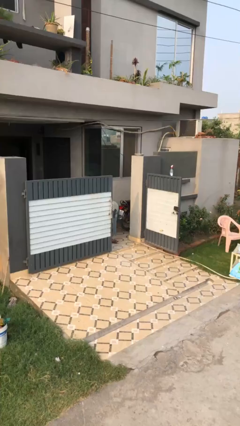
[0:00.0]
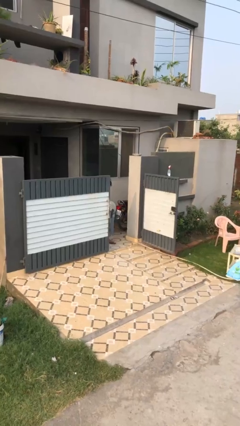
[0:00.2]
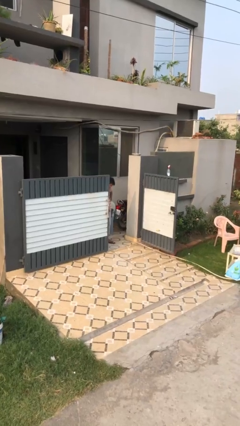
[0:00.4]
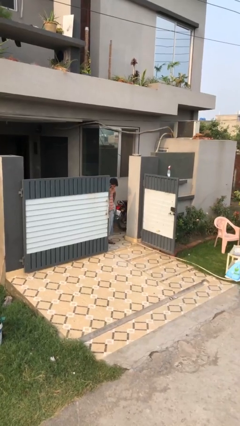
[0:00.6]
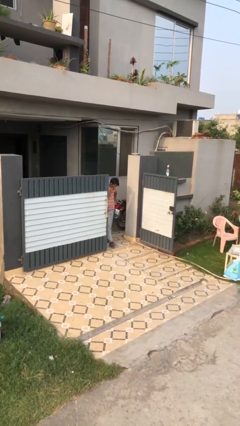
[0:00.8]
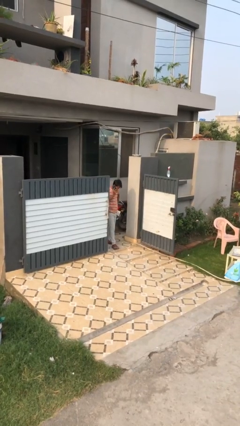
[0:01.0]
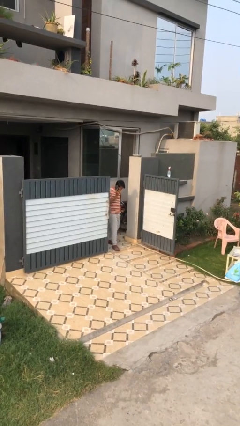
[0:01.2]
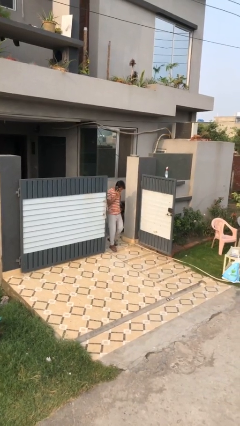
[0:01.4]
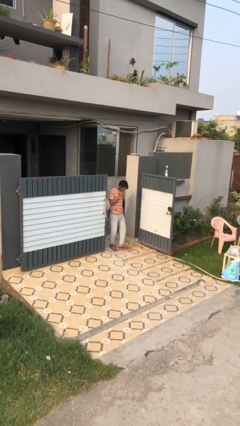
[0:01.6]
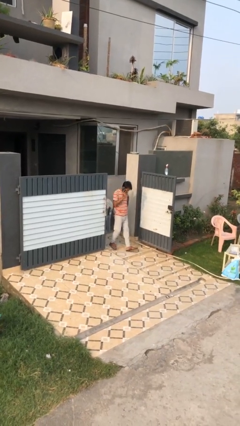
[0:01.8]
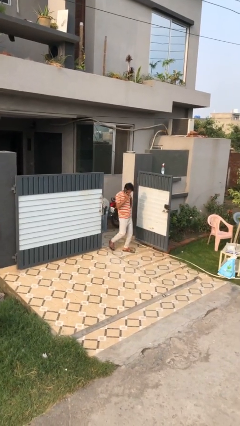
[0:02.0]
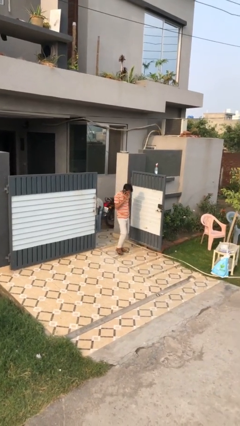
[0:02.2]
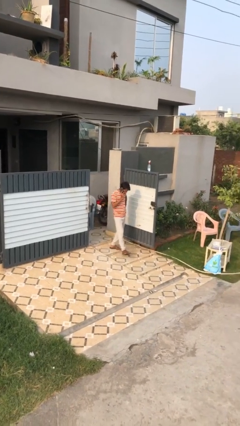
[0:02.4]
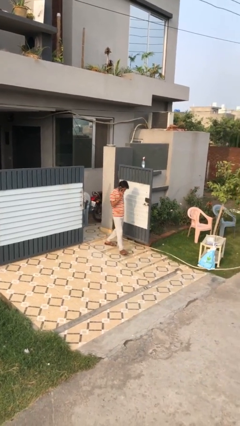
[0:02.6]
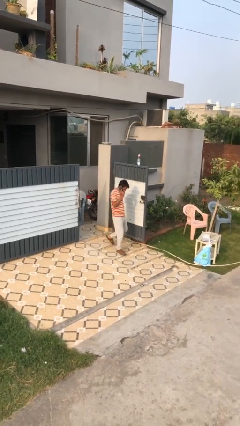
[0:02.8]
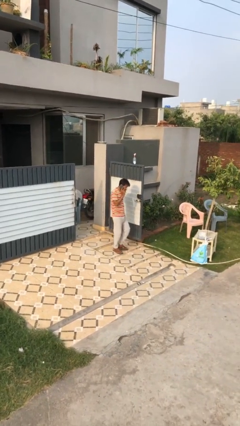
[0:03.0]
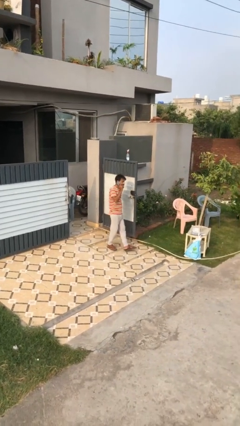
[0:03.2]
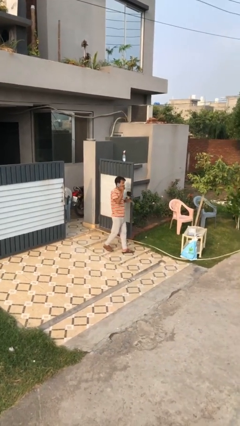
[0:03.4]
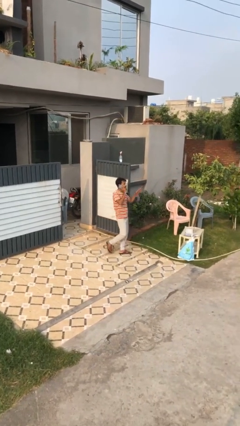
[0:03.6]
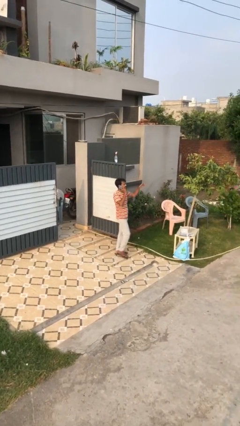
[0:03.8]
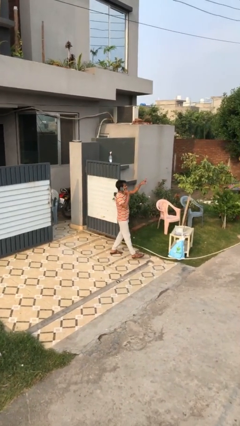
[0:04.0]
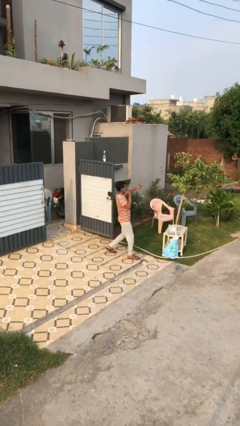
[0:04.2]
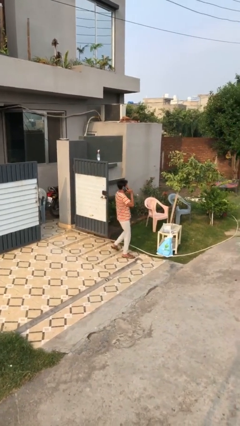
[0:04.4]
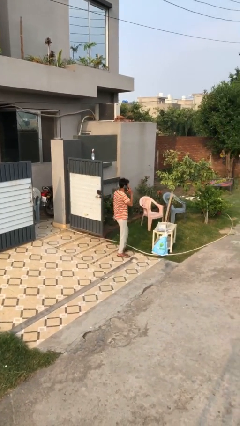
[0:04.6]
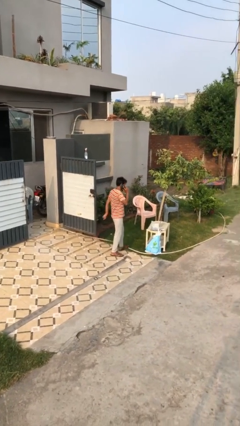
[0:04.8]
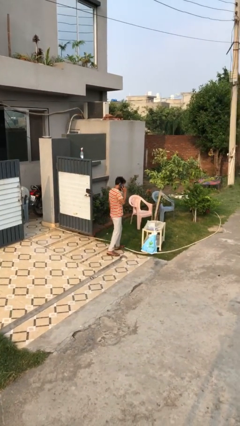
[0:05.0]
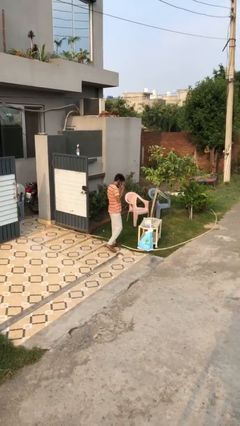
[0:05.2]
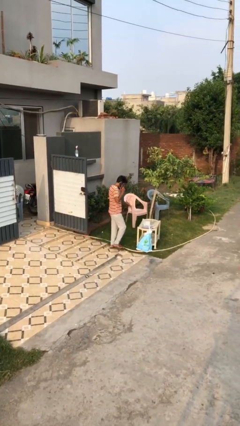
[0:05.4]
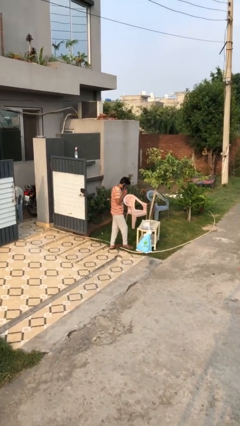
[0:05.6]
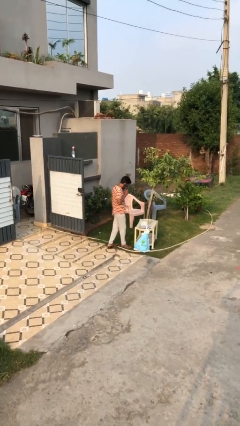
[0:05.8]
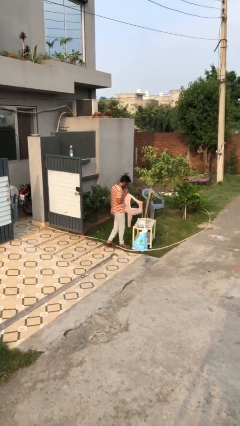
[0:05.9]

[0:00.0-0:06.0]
person enters scene through structure

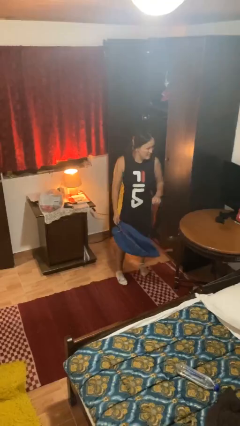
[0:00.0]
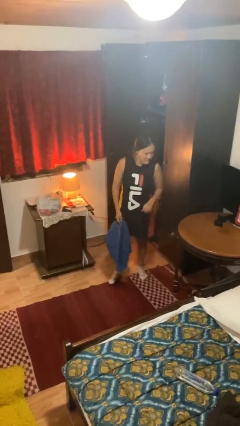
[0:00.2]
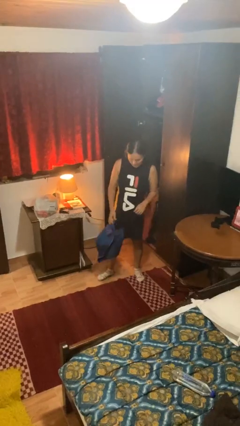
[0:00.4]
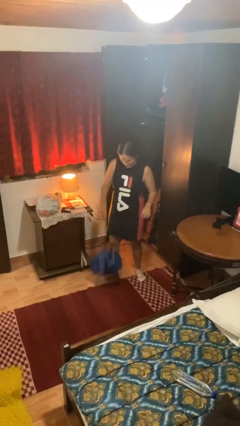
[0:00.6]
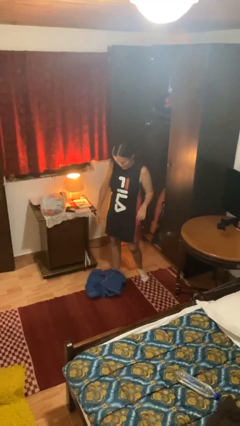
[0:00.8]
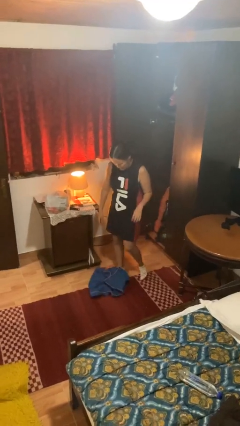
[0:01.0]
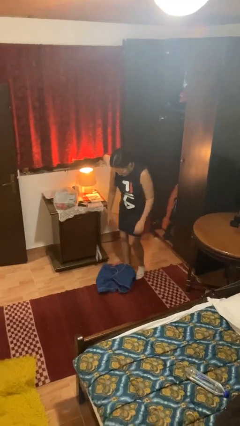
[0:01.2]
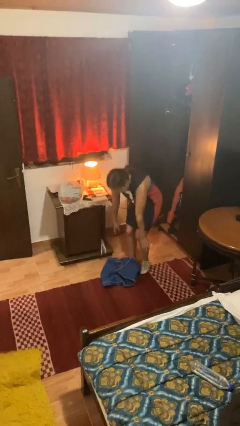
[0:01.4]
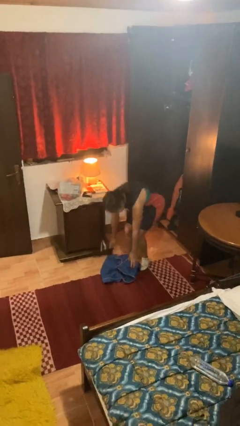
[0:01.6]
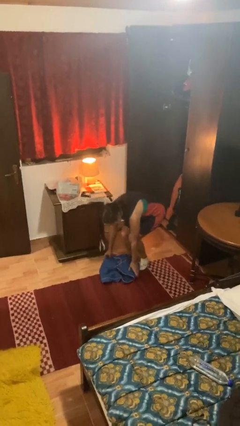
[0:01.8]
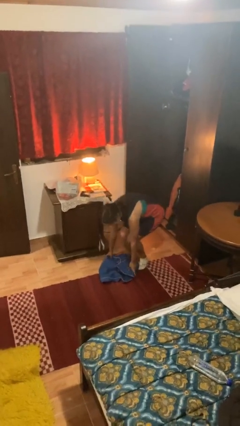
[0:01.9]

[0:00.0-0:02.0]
person drops object

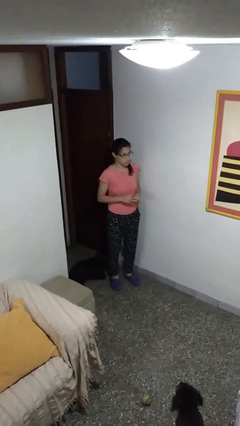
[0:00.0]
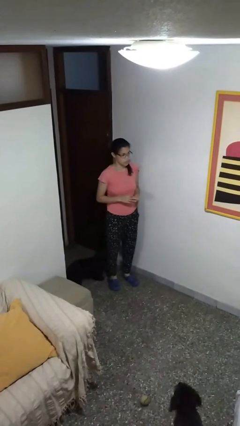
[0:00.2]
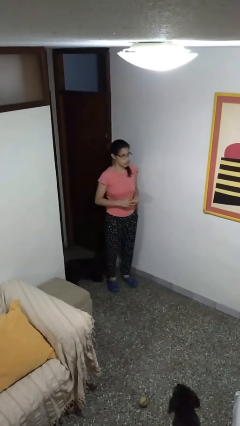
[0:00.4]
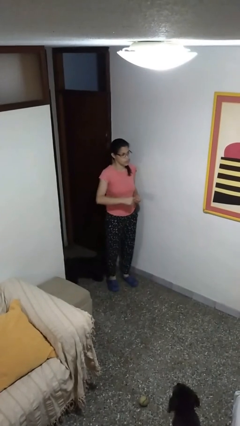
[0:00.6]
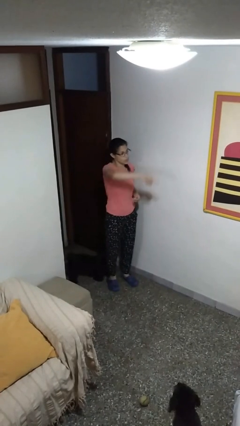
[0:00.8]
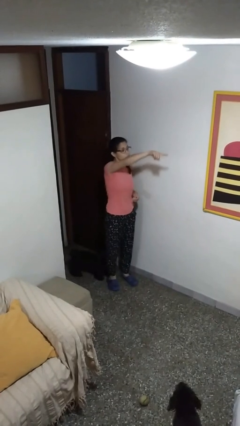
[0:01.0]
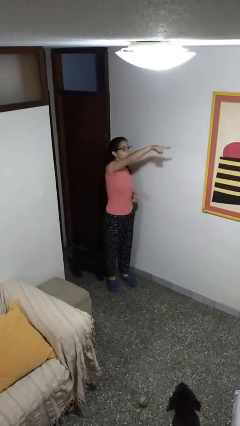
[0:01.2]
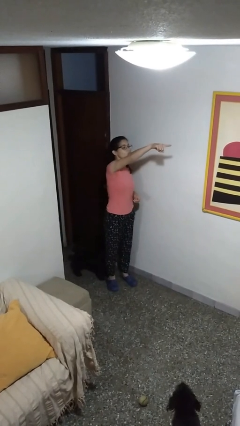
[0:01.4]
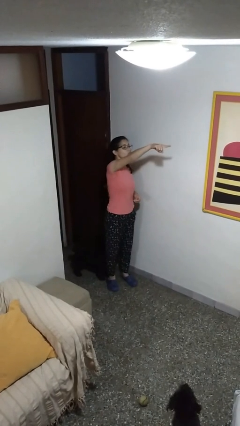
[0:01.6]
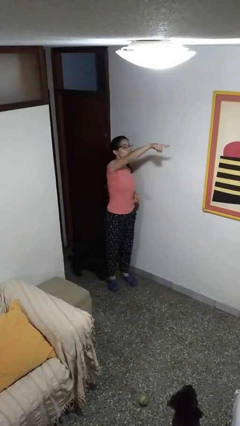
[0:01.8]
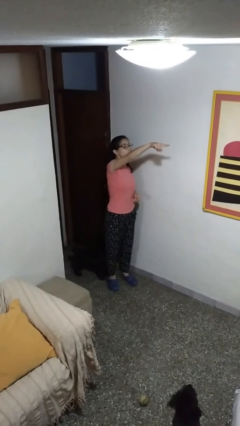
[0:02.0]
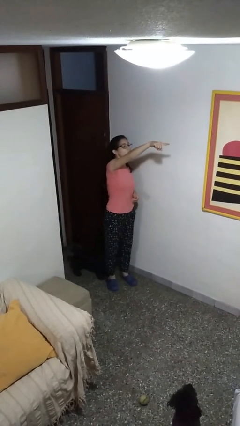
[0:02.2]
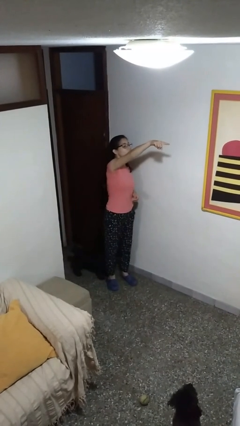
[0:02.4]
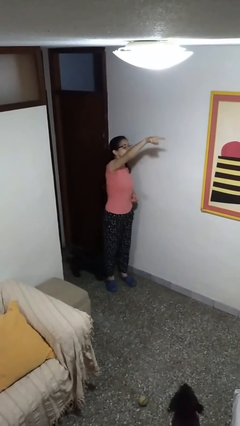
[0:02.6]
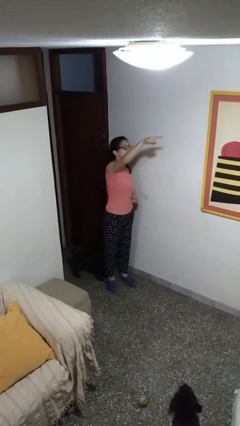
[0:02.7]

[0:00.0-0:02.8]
person points at person

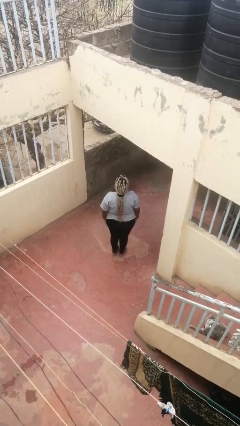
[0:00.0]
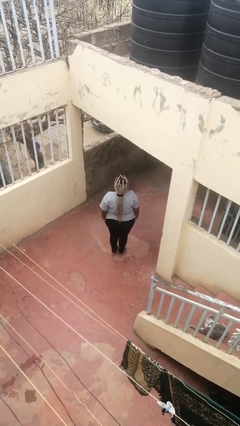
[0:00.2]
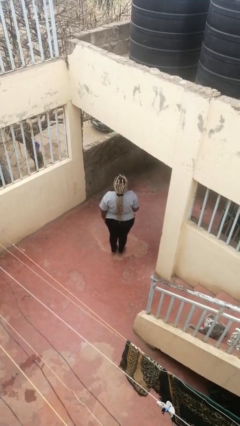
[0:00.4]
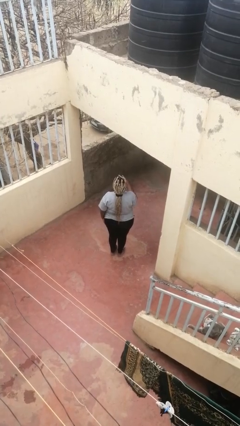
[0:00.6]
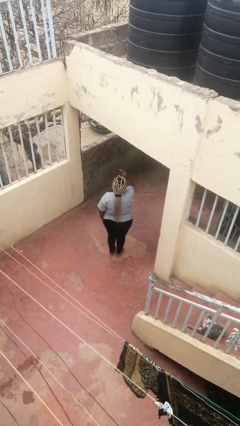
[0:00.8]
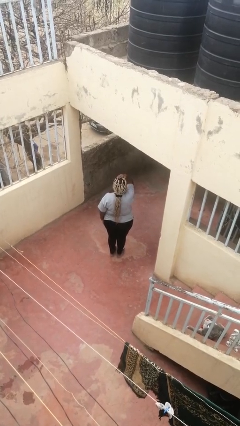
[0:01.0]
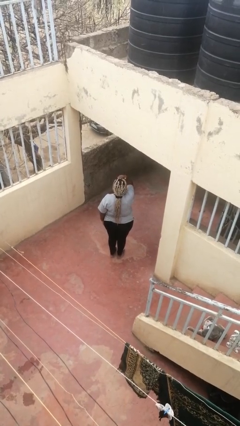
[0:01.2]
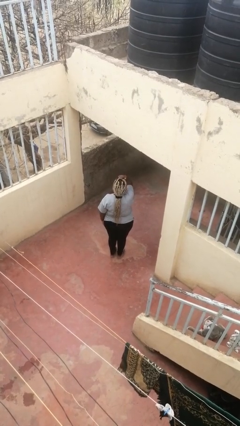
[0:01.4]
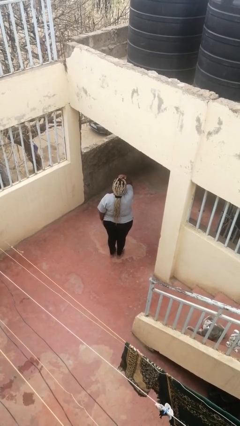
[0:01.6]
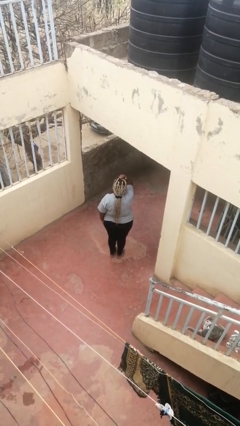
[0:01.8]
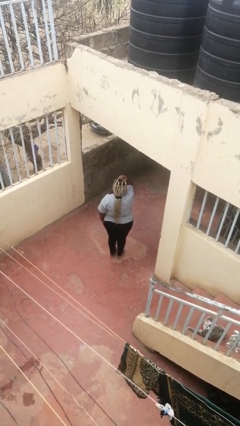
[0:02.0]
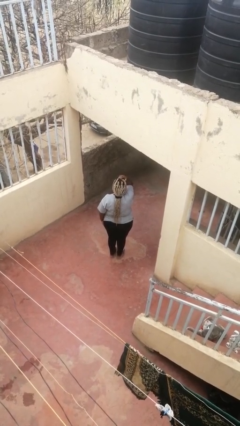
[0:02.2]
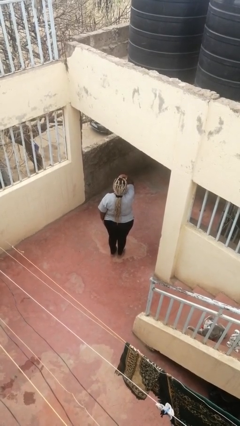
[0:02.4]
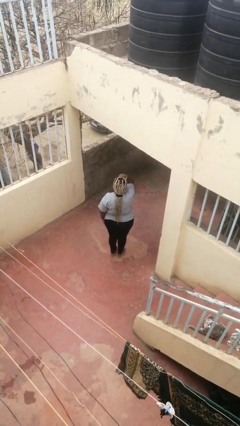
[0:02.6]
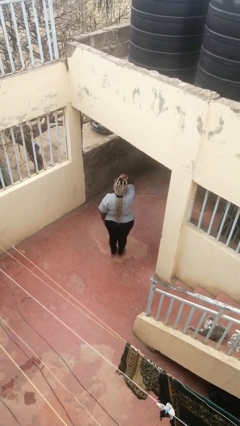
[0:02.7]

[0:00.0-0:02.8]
person pats head

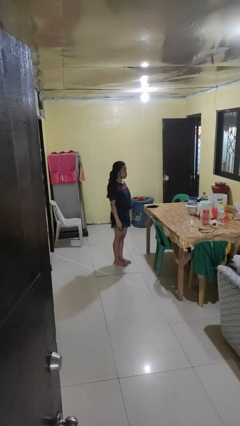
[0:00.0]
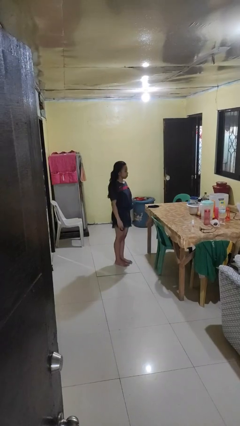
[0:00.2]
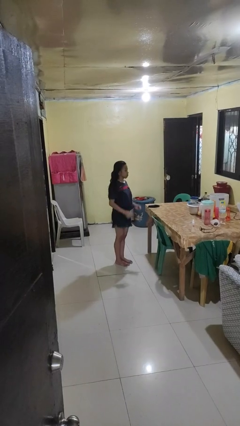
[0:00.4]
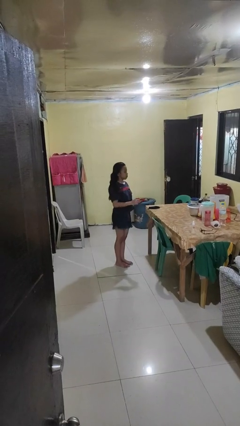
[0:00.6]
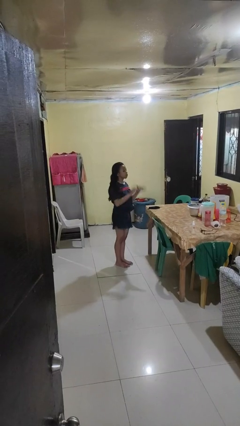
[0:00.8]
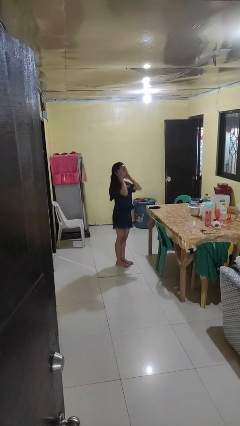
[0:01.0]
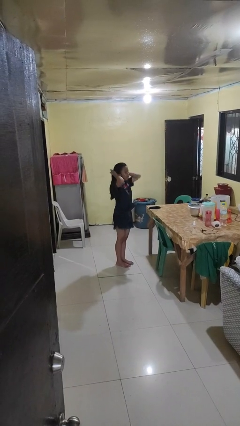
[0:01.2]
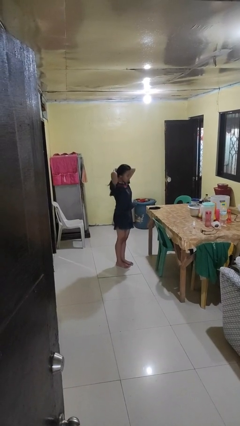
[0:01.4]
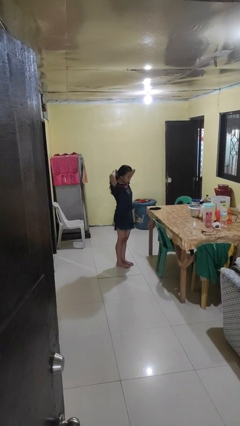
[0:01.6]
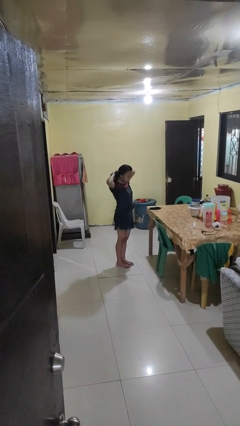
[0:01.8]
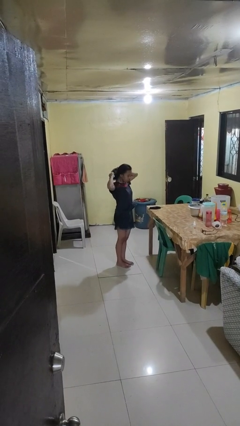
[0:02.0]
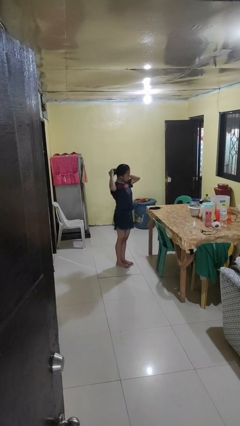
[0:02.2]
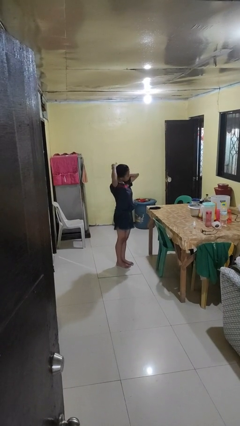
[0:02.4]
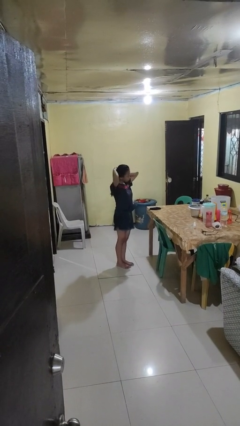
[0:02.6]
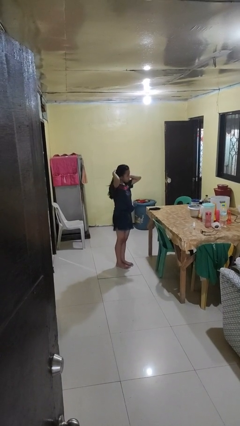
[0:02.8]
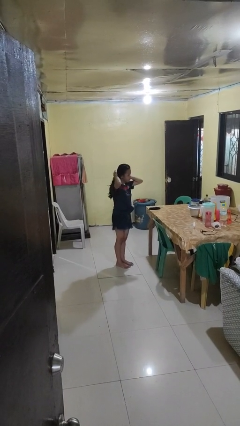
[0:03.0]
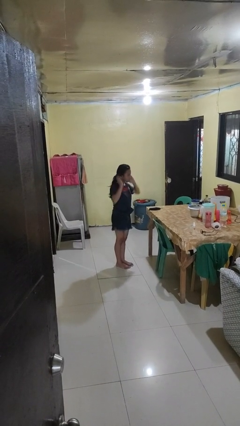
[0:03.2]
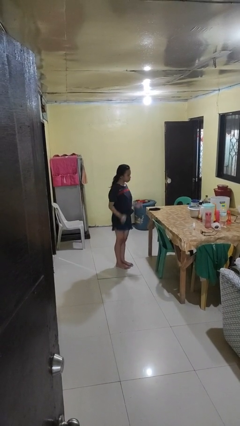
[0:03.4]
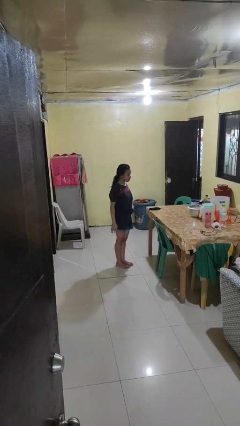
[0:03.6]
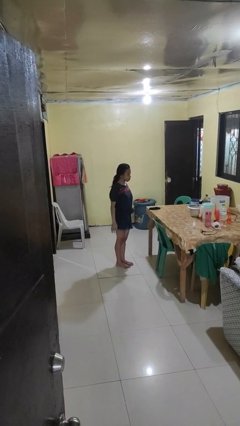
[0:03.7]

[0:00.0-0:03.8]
person puts hair in ponytail
